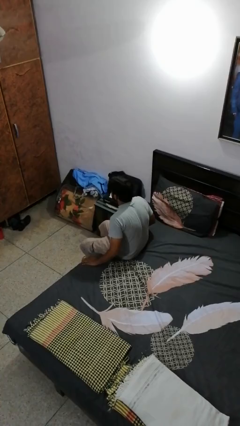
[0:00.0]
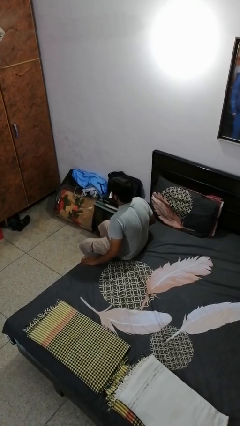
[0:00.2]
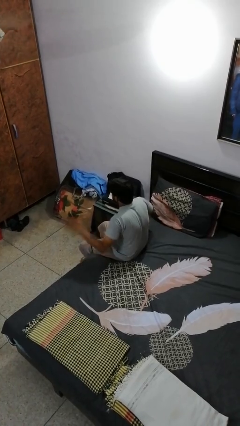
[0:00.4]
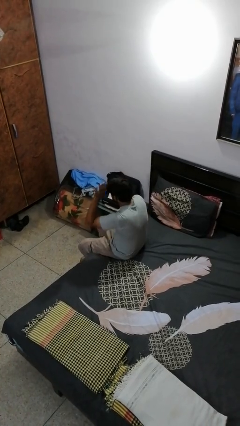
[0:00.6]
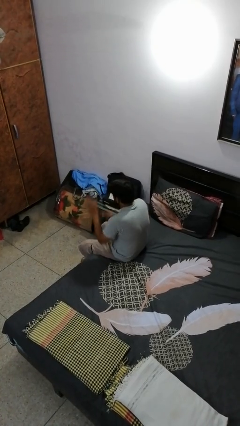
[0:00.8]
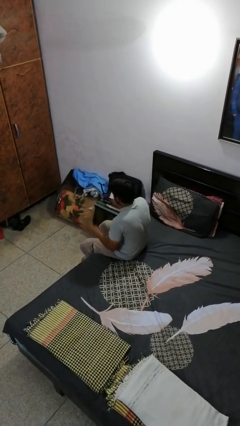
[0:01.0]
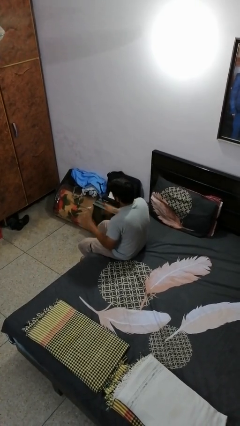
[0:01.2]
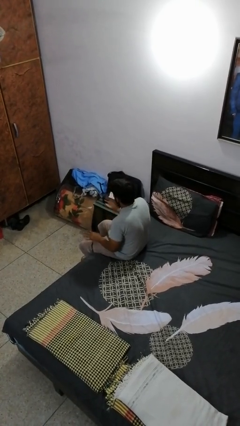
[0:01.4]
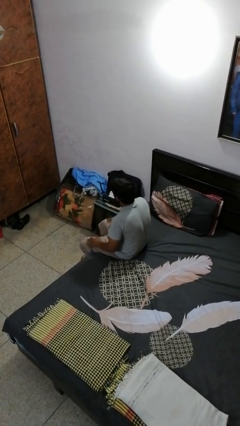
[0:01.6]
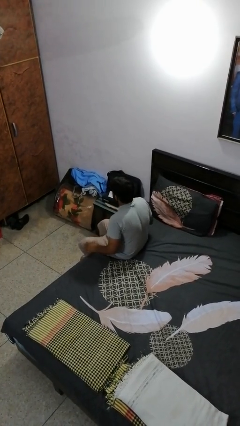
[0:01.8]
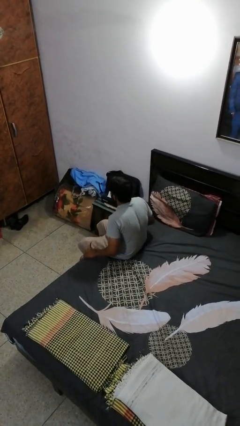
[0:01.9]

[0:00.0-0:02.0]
person slaps hands on thighs

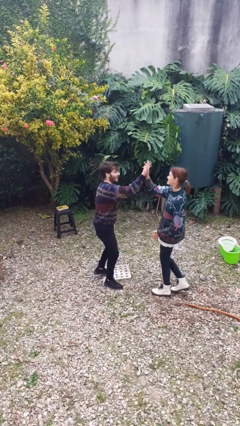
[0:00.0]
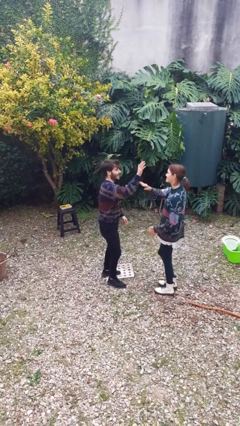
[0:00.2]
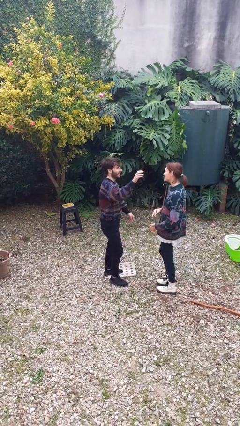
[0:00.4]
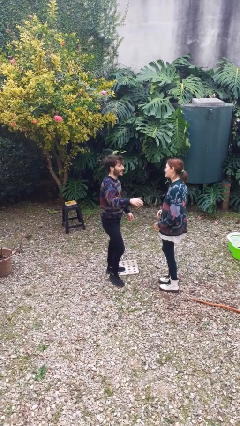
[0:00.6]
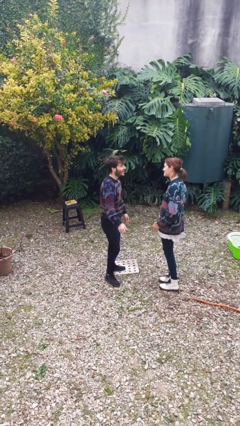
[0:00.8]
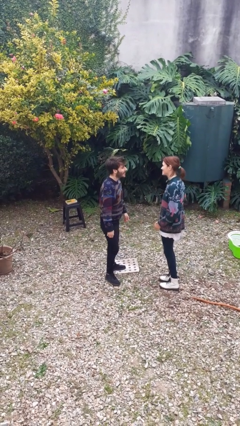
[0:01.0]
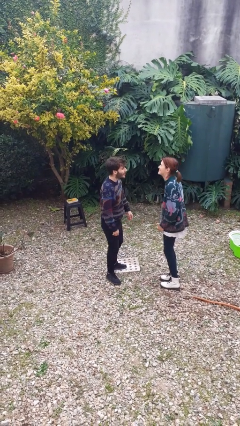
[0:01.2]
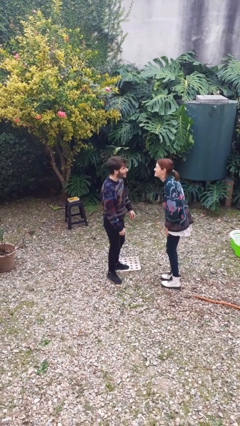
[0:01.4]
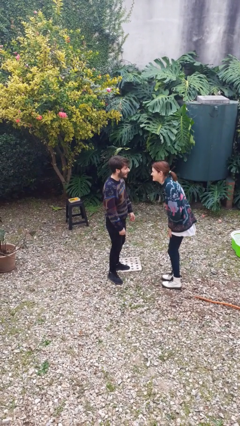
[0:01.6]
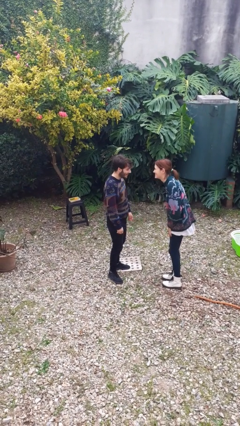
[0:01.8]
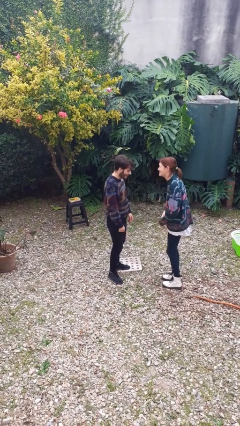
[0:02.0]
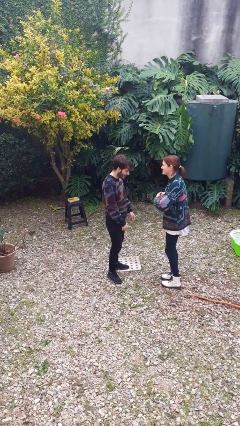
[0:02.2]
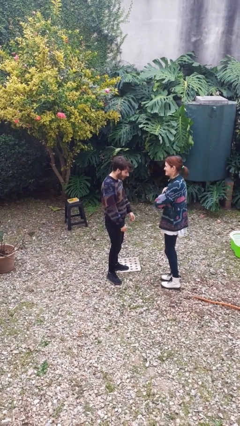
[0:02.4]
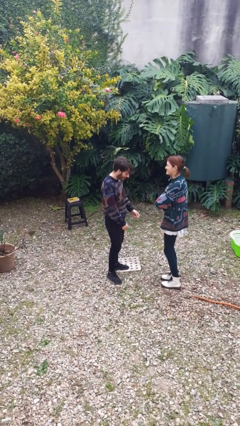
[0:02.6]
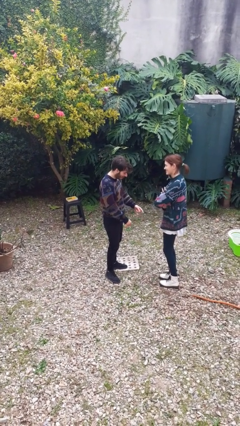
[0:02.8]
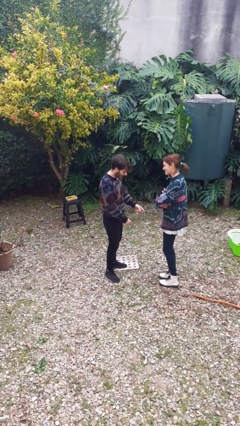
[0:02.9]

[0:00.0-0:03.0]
person highfives hand

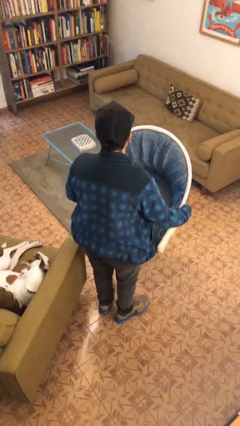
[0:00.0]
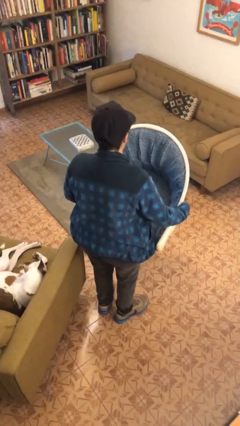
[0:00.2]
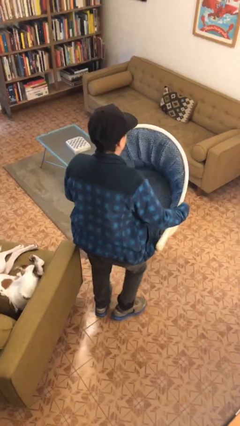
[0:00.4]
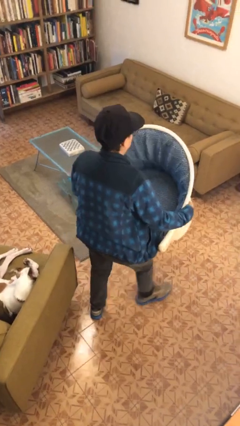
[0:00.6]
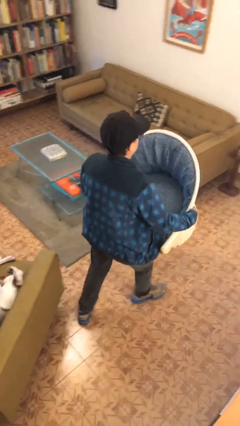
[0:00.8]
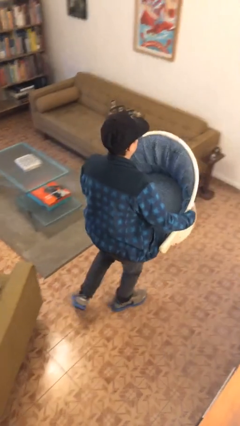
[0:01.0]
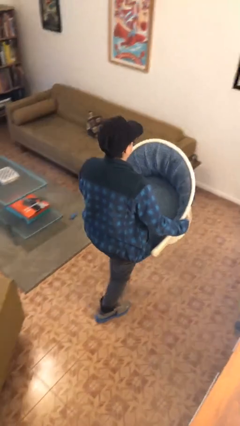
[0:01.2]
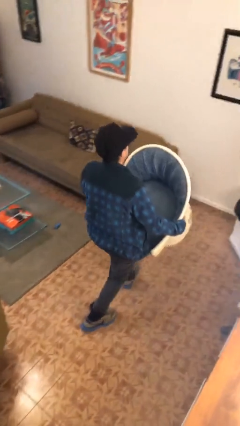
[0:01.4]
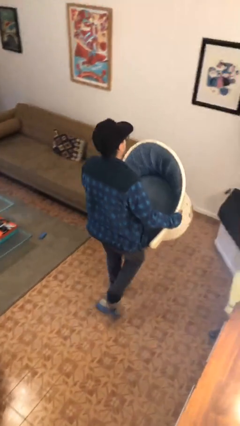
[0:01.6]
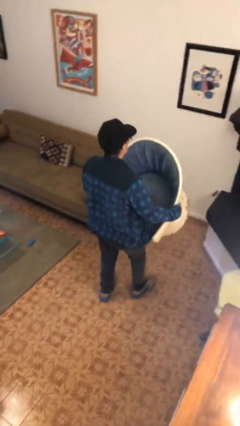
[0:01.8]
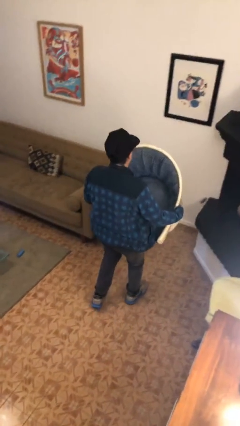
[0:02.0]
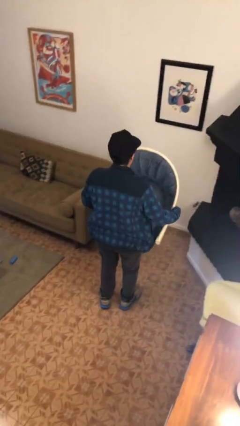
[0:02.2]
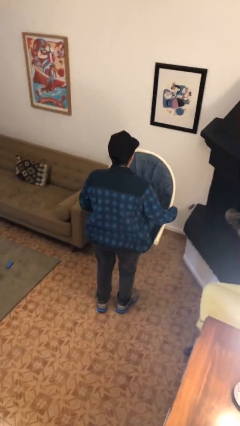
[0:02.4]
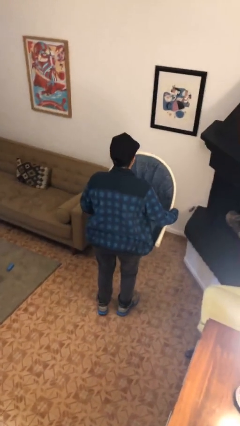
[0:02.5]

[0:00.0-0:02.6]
person carries furniture

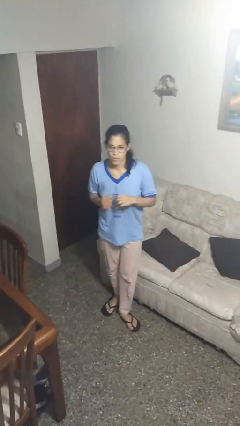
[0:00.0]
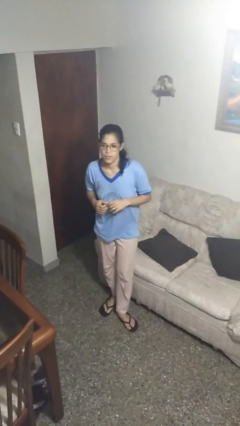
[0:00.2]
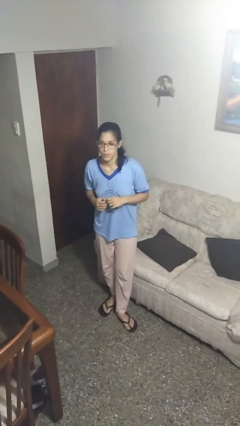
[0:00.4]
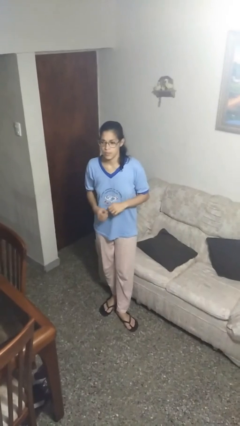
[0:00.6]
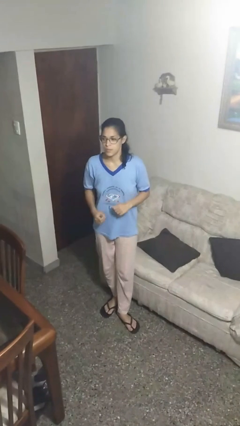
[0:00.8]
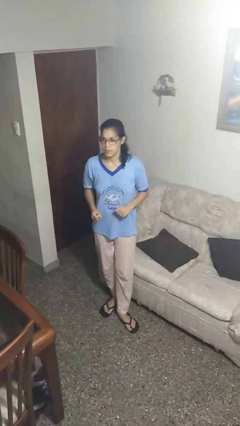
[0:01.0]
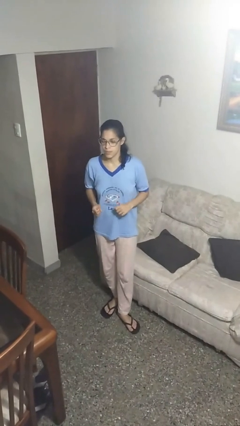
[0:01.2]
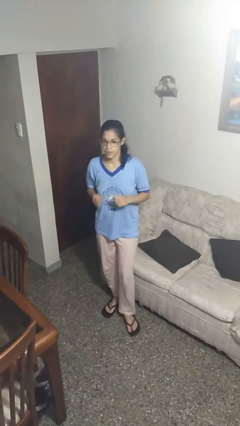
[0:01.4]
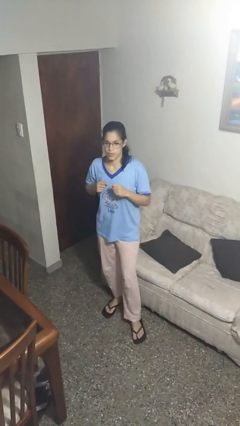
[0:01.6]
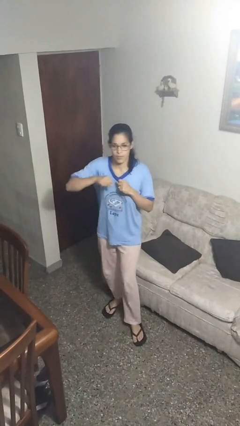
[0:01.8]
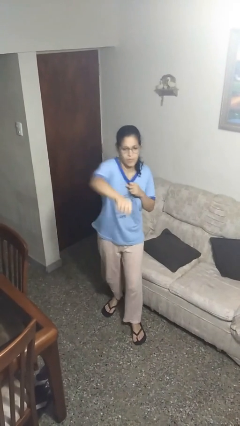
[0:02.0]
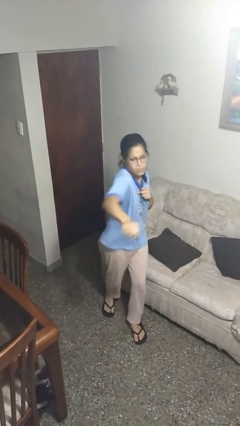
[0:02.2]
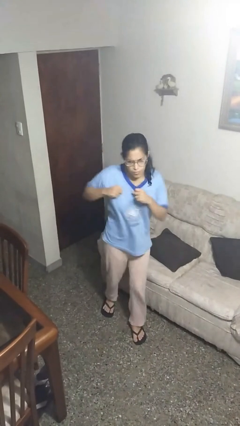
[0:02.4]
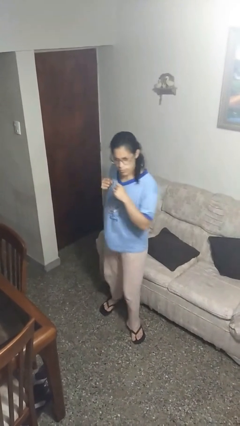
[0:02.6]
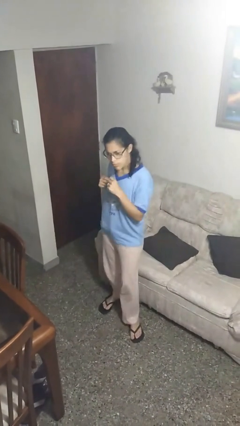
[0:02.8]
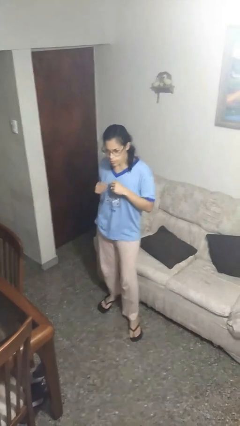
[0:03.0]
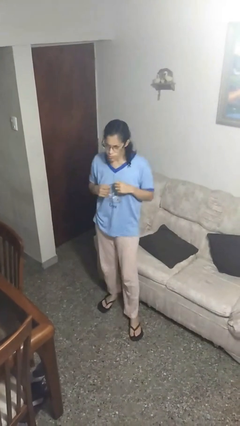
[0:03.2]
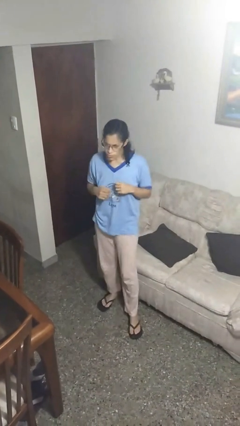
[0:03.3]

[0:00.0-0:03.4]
person karate chop

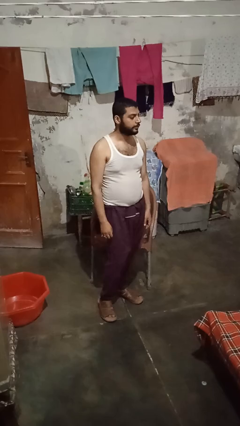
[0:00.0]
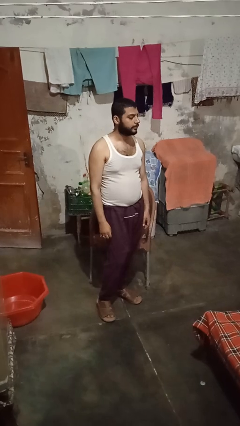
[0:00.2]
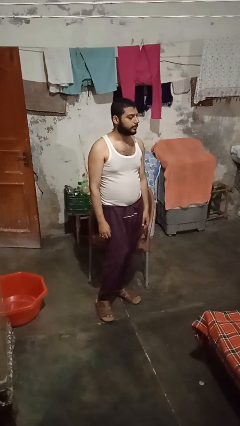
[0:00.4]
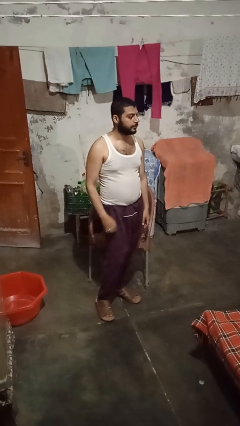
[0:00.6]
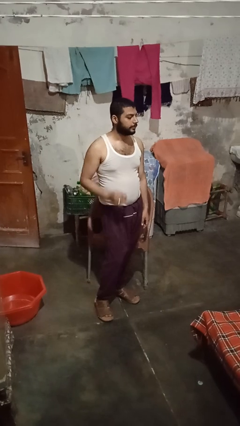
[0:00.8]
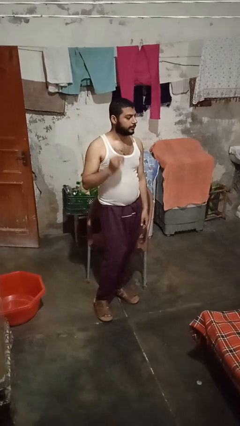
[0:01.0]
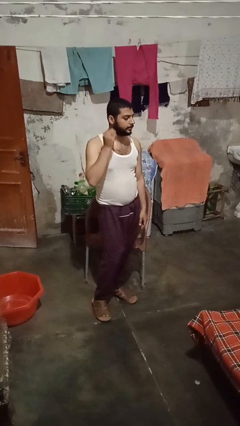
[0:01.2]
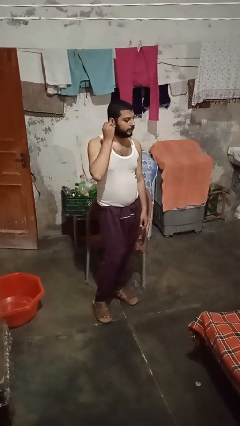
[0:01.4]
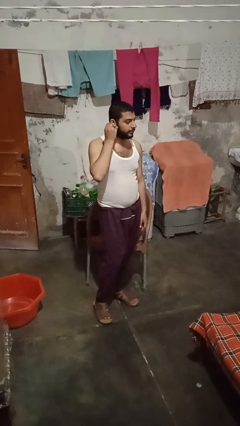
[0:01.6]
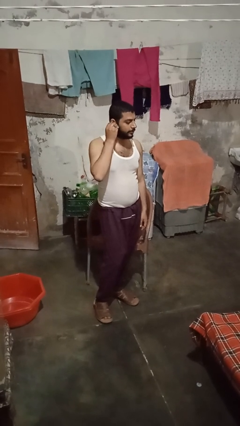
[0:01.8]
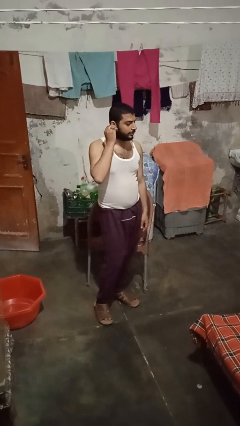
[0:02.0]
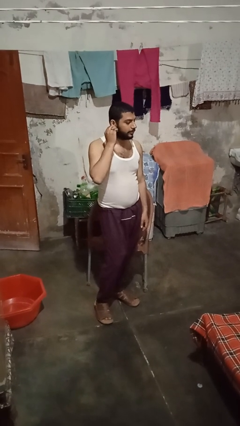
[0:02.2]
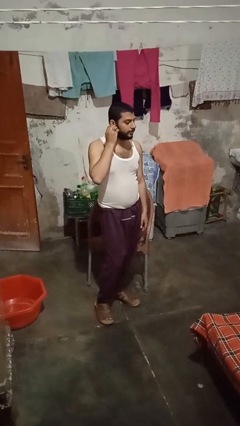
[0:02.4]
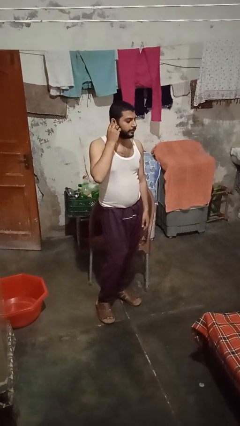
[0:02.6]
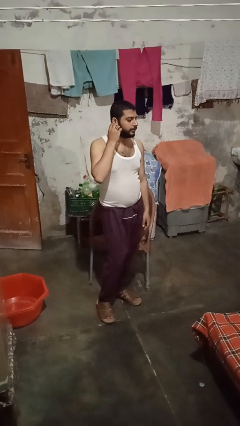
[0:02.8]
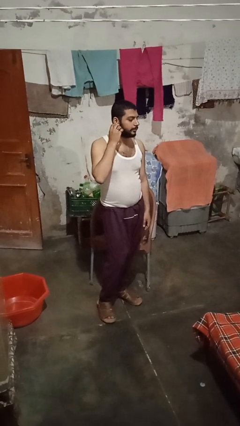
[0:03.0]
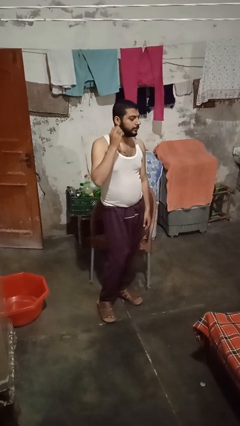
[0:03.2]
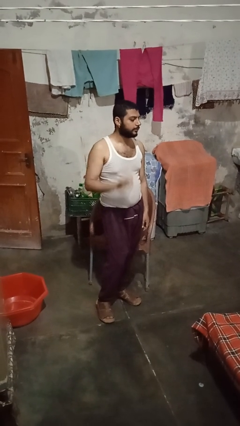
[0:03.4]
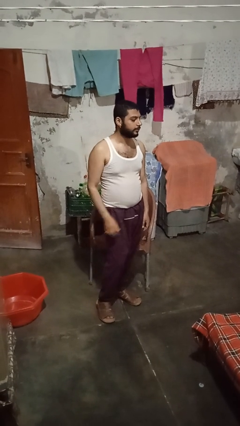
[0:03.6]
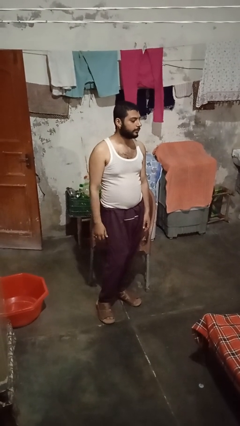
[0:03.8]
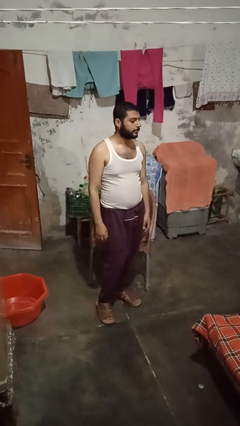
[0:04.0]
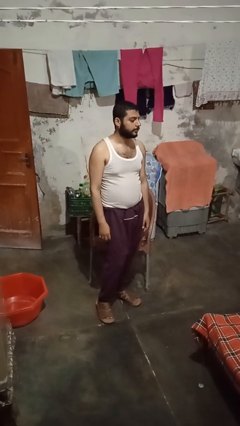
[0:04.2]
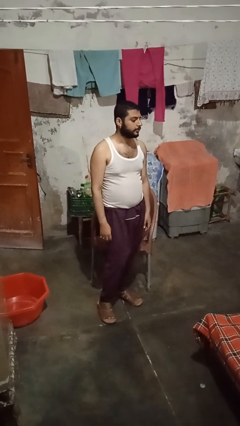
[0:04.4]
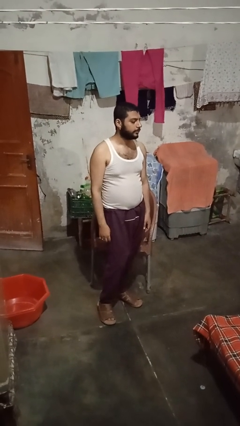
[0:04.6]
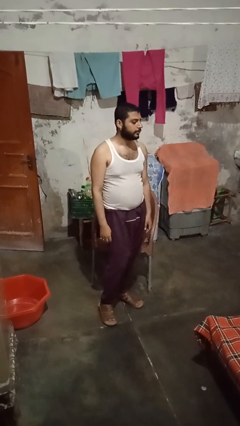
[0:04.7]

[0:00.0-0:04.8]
person puts on earrings

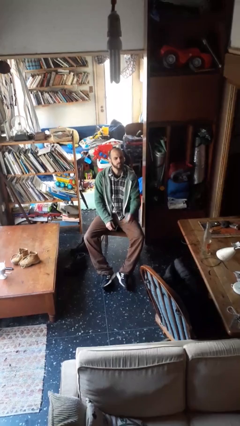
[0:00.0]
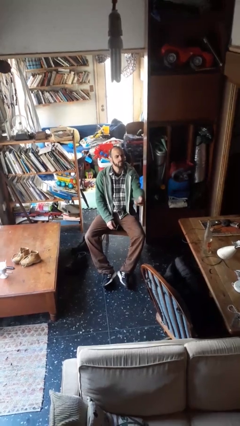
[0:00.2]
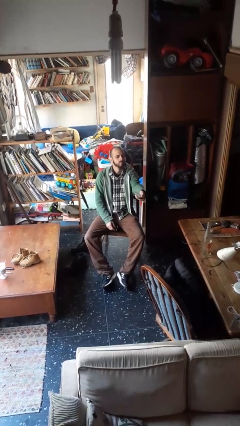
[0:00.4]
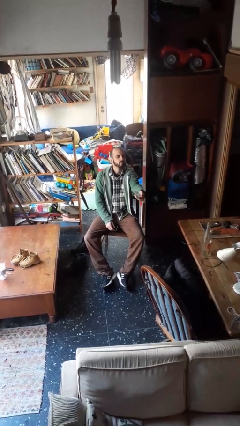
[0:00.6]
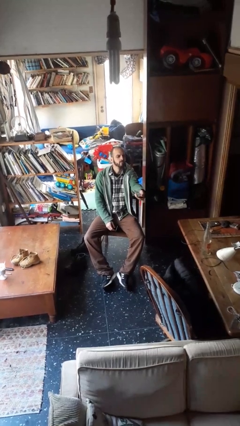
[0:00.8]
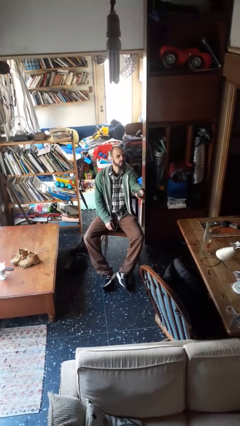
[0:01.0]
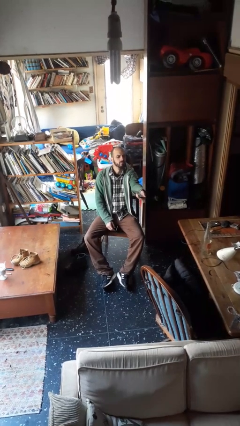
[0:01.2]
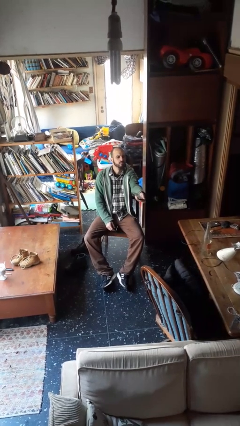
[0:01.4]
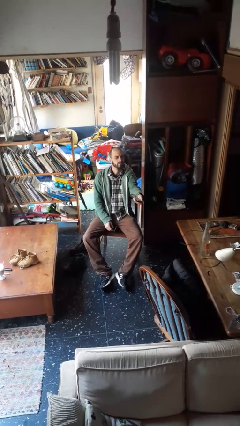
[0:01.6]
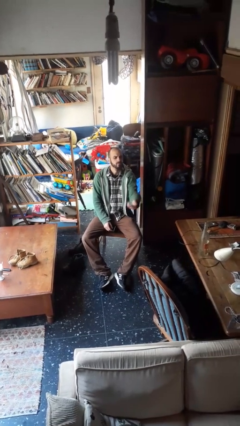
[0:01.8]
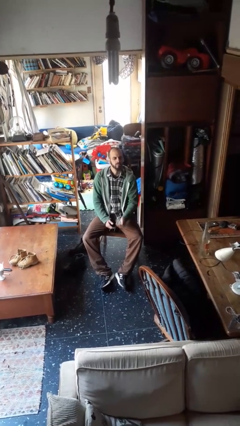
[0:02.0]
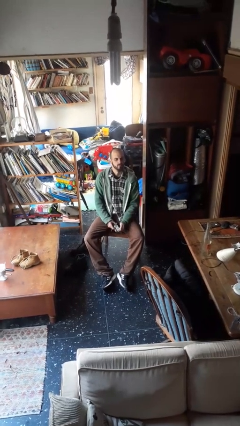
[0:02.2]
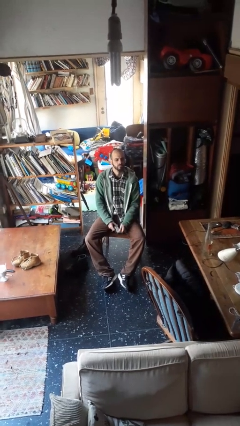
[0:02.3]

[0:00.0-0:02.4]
person uses television remote
